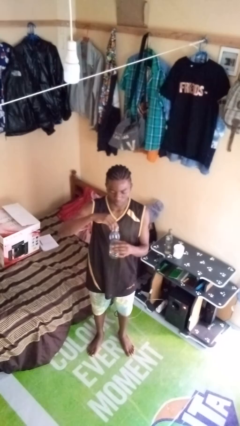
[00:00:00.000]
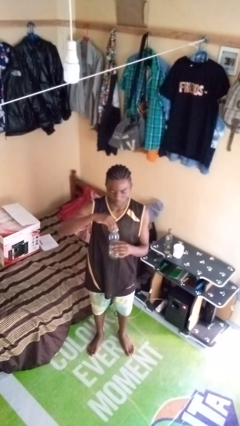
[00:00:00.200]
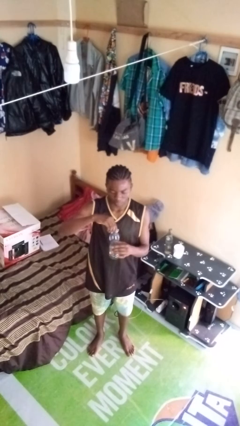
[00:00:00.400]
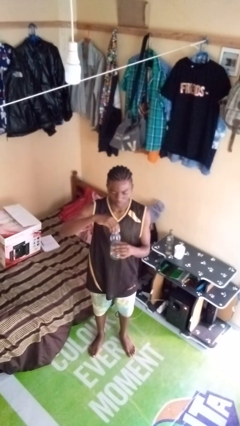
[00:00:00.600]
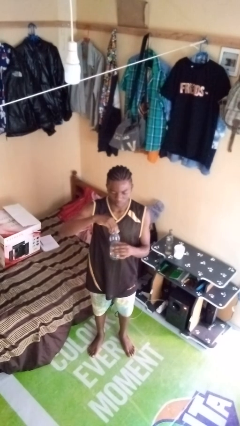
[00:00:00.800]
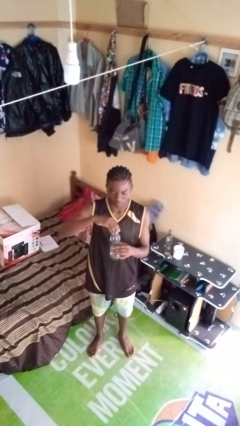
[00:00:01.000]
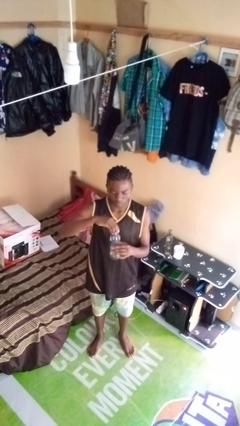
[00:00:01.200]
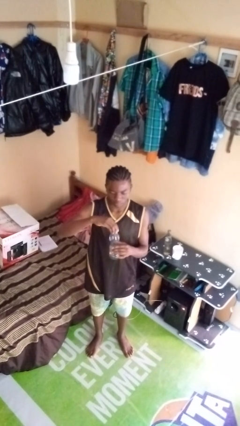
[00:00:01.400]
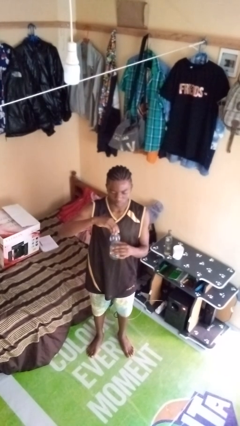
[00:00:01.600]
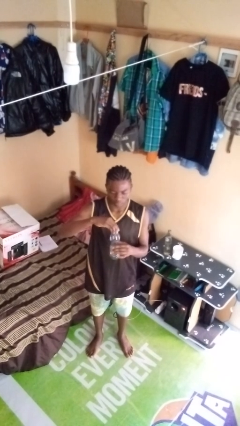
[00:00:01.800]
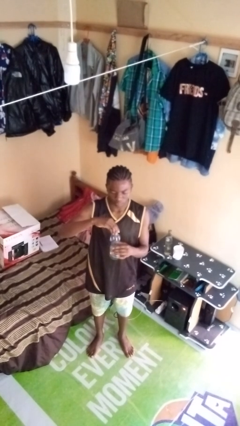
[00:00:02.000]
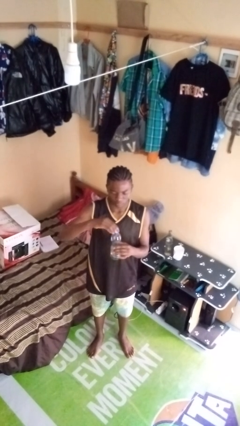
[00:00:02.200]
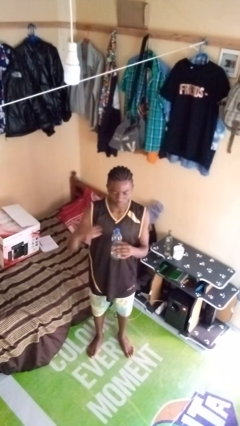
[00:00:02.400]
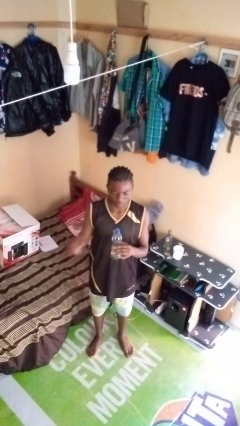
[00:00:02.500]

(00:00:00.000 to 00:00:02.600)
person screws lid to bottle

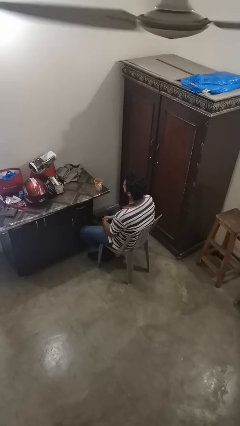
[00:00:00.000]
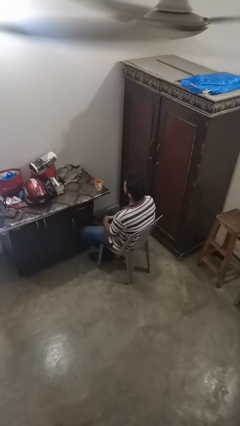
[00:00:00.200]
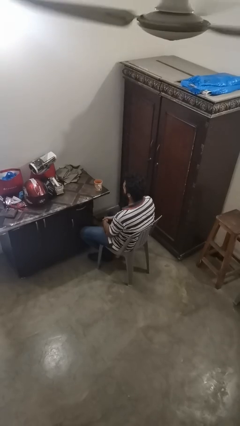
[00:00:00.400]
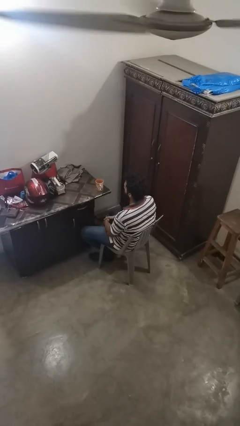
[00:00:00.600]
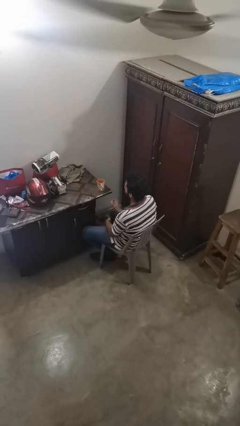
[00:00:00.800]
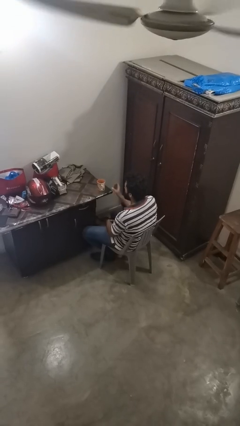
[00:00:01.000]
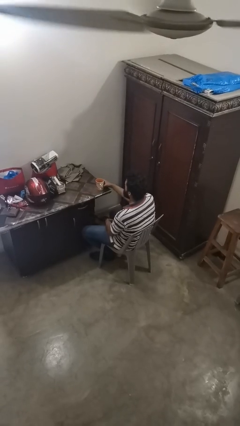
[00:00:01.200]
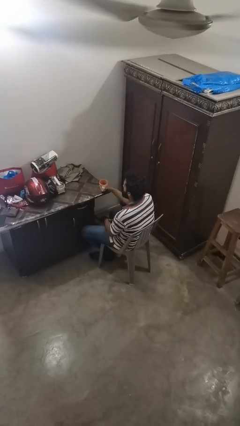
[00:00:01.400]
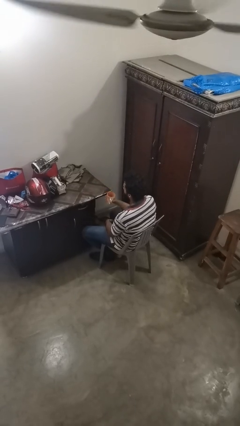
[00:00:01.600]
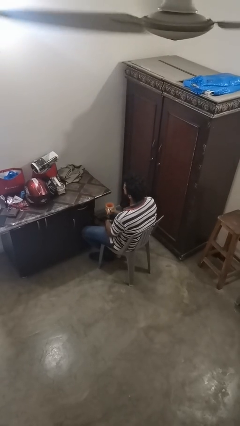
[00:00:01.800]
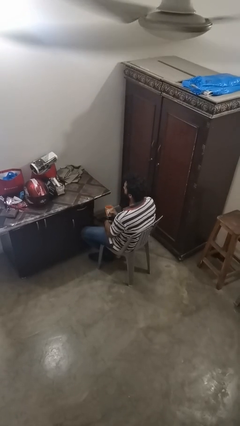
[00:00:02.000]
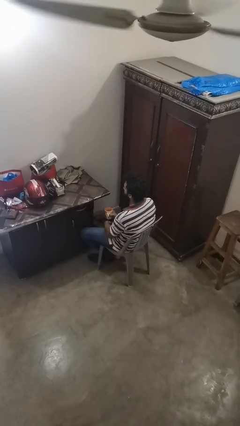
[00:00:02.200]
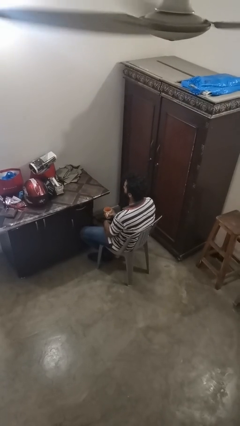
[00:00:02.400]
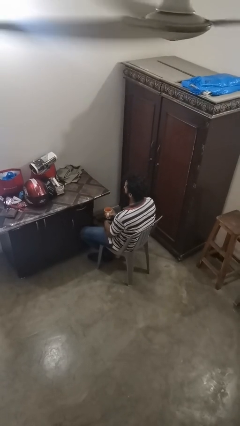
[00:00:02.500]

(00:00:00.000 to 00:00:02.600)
person picks up object from table

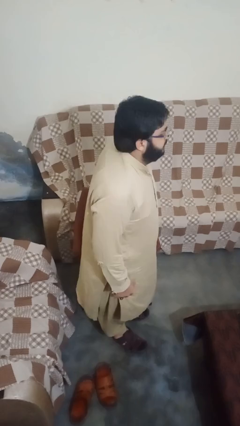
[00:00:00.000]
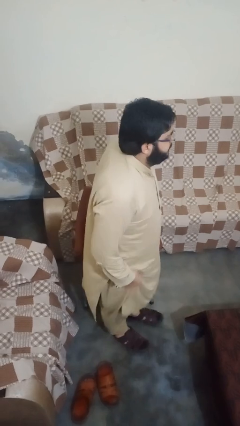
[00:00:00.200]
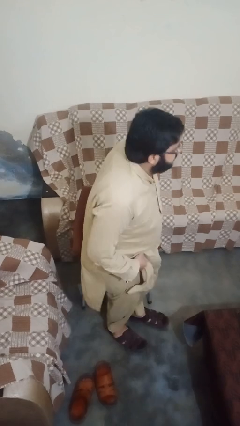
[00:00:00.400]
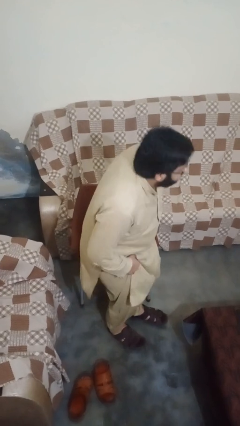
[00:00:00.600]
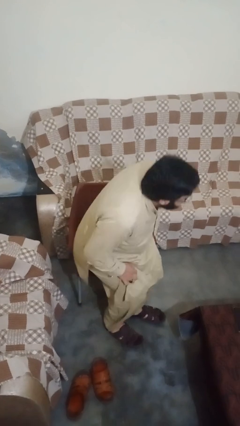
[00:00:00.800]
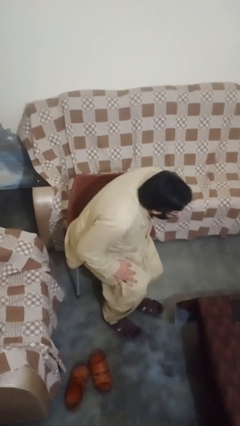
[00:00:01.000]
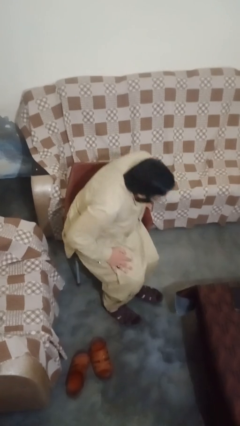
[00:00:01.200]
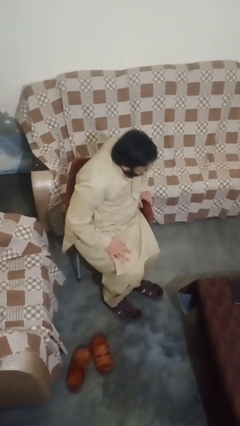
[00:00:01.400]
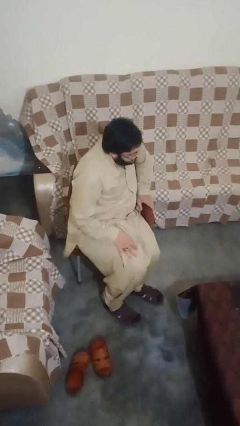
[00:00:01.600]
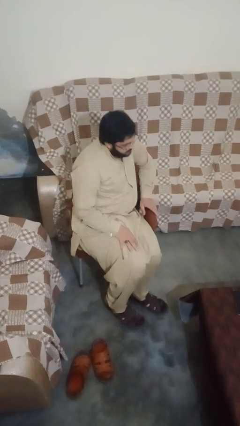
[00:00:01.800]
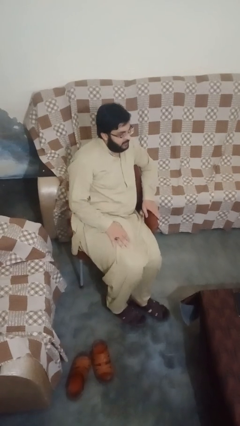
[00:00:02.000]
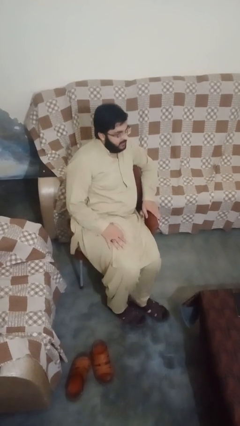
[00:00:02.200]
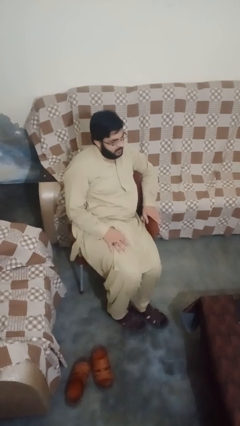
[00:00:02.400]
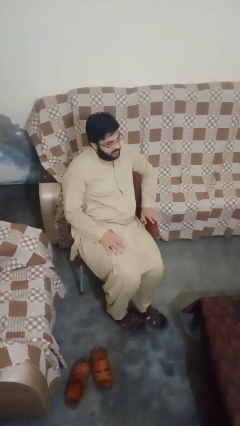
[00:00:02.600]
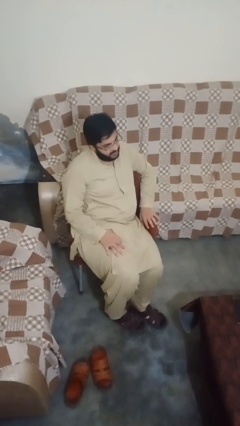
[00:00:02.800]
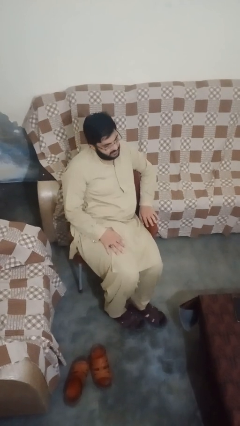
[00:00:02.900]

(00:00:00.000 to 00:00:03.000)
person sits down

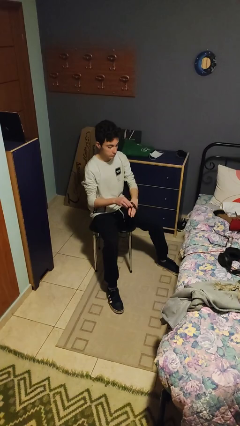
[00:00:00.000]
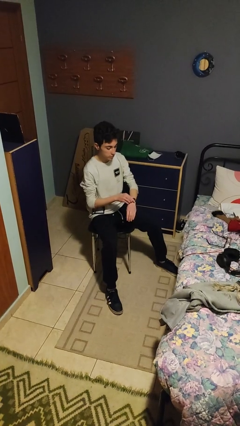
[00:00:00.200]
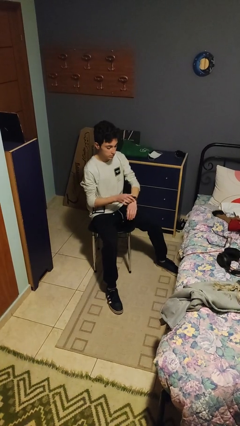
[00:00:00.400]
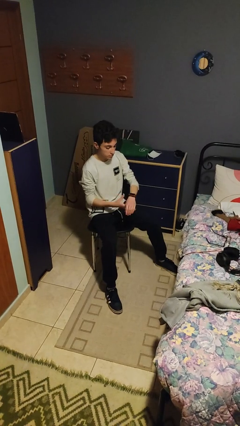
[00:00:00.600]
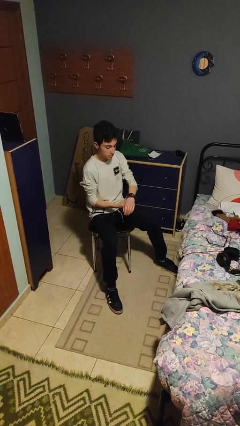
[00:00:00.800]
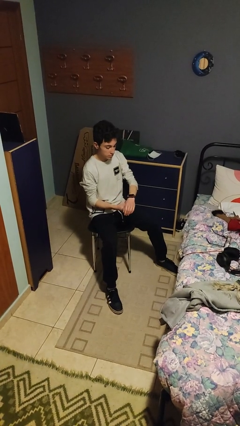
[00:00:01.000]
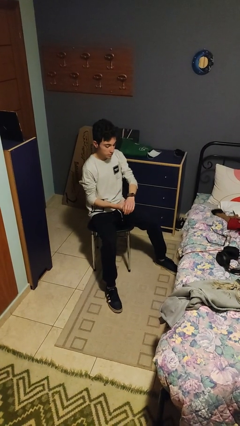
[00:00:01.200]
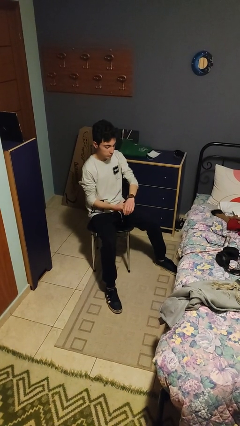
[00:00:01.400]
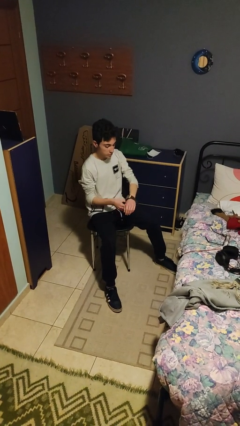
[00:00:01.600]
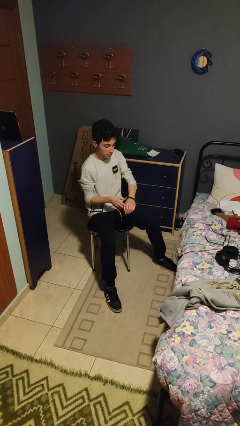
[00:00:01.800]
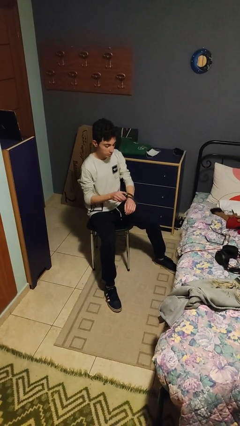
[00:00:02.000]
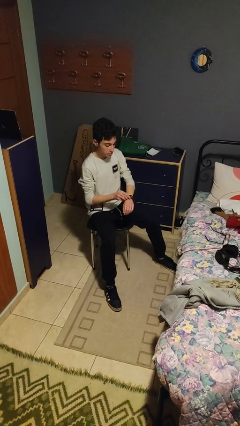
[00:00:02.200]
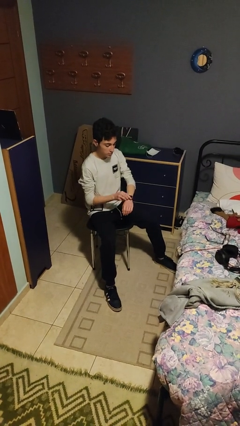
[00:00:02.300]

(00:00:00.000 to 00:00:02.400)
person puts on wristwatch

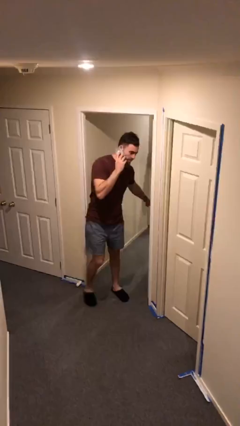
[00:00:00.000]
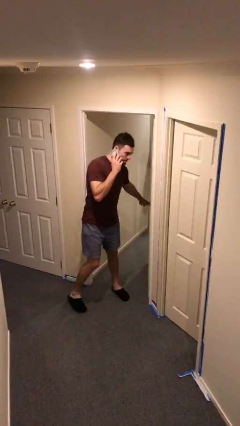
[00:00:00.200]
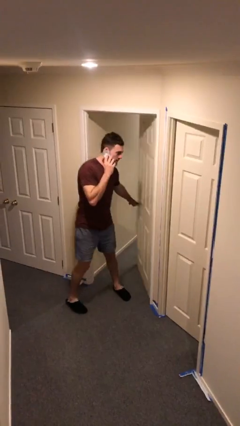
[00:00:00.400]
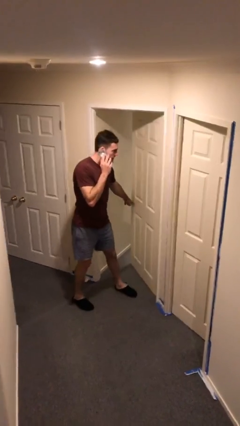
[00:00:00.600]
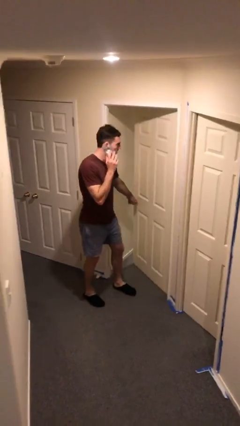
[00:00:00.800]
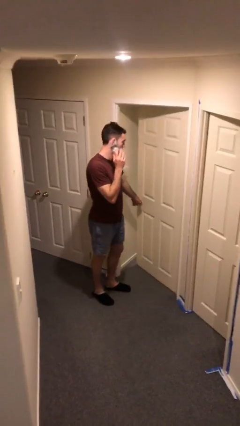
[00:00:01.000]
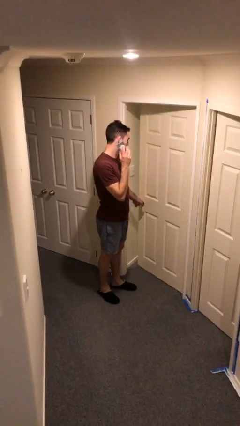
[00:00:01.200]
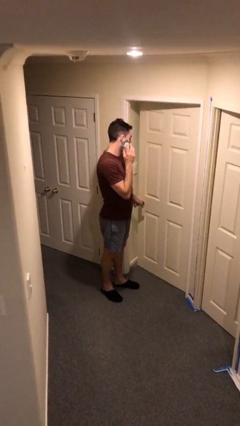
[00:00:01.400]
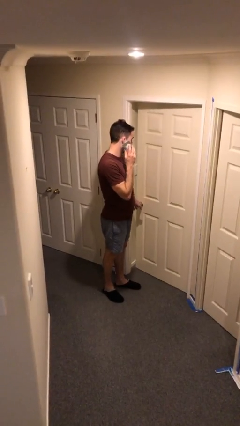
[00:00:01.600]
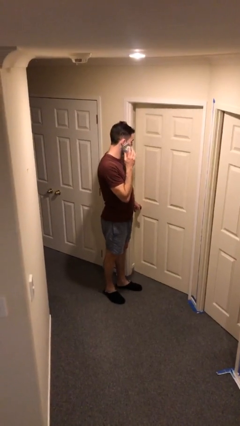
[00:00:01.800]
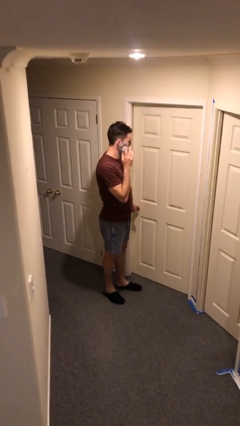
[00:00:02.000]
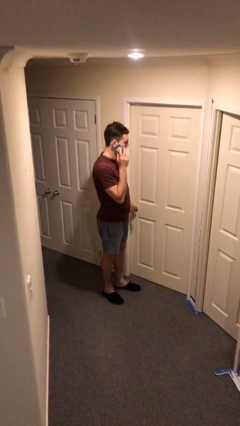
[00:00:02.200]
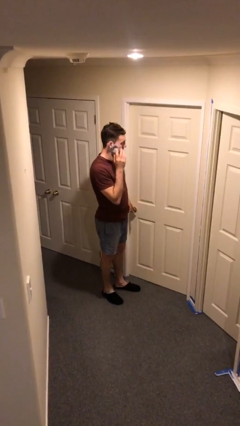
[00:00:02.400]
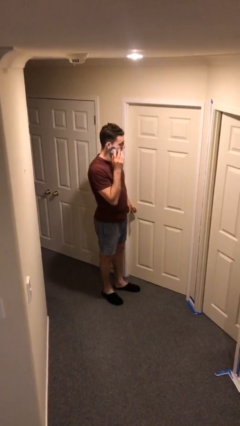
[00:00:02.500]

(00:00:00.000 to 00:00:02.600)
person closes facility door

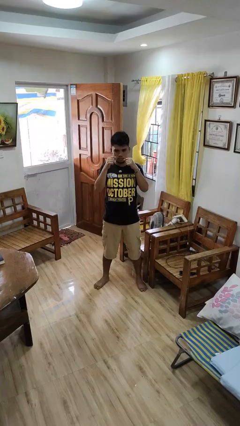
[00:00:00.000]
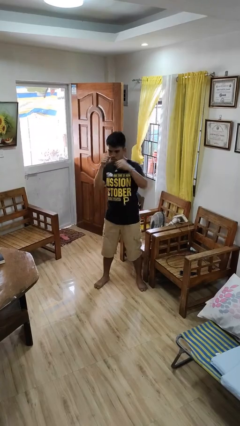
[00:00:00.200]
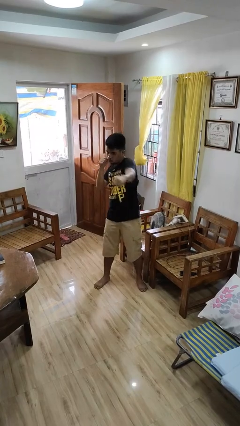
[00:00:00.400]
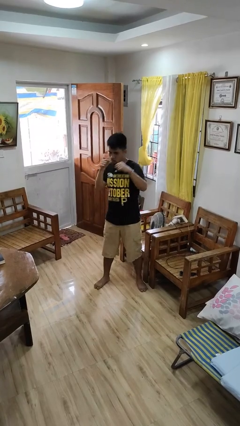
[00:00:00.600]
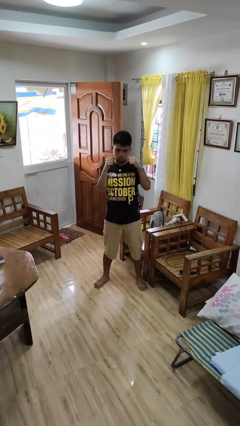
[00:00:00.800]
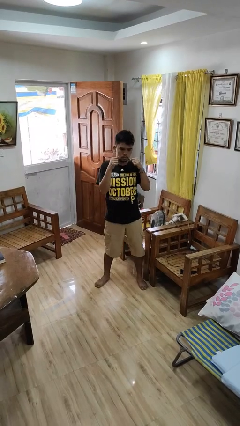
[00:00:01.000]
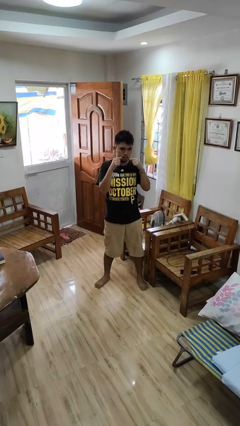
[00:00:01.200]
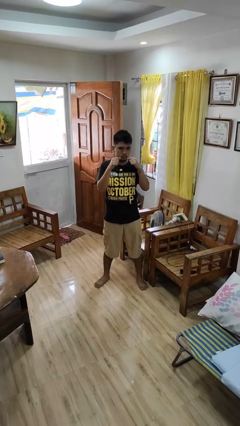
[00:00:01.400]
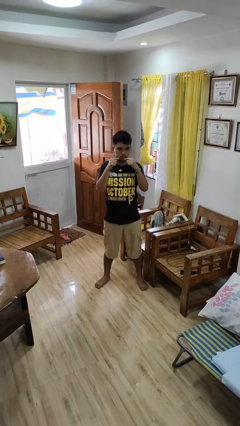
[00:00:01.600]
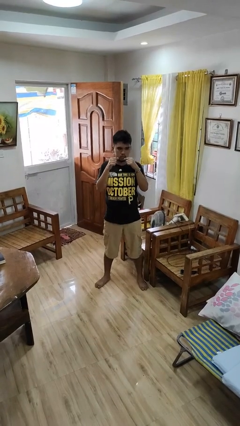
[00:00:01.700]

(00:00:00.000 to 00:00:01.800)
person punches

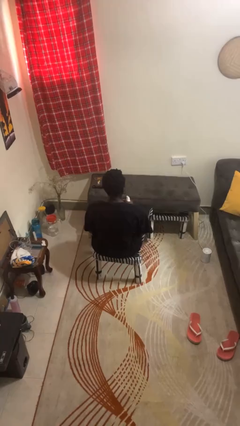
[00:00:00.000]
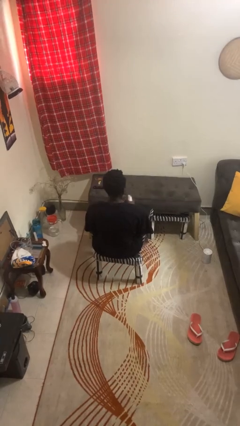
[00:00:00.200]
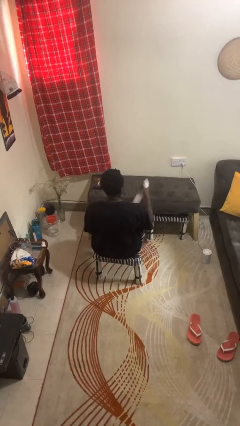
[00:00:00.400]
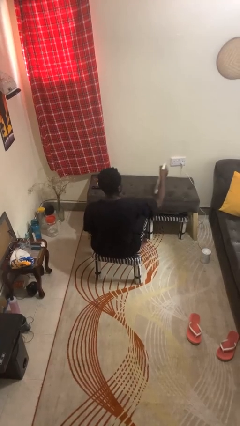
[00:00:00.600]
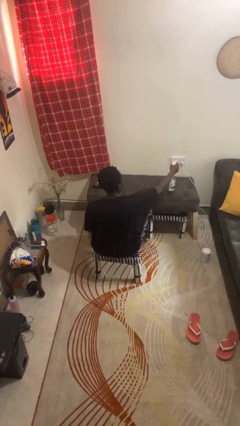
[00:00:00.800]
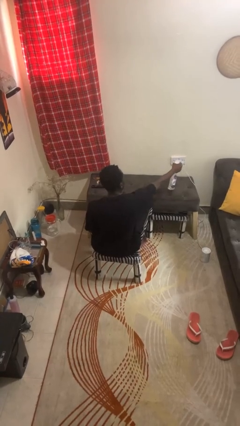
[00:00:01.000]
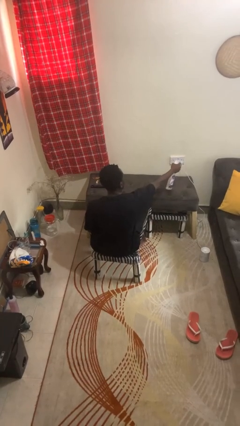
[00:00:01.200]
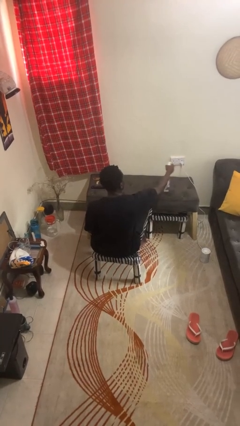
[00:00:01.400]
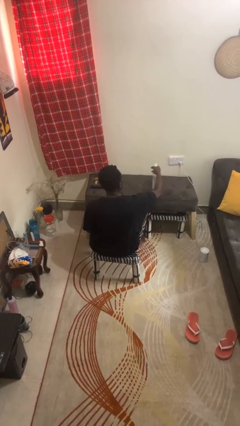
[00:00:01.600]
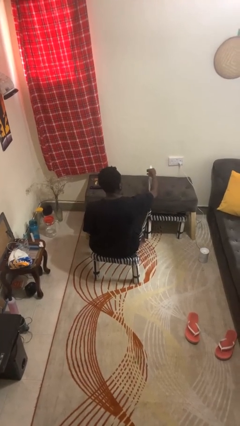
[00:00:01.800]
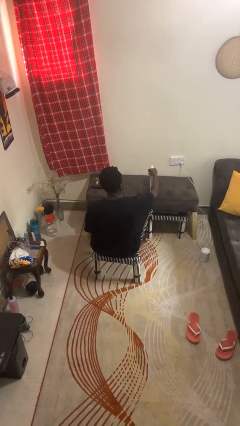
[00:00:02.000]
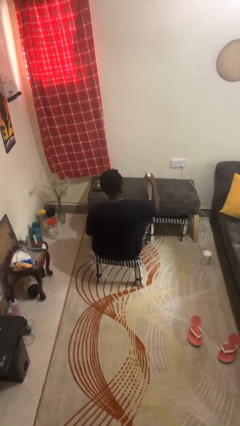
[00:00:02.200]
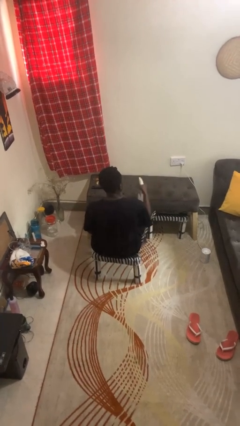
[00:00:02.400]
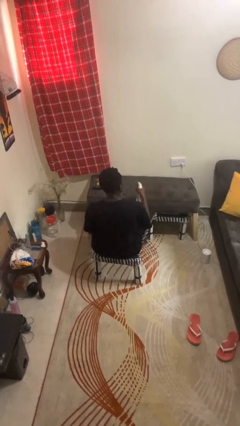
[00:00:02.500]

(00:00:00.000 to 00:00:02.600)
person sprays from bottle
